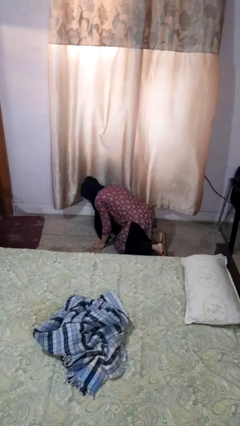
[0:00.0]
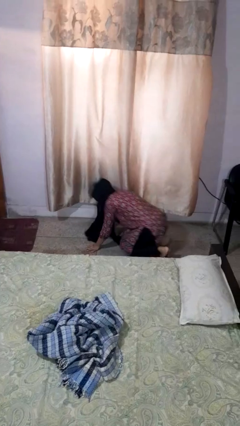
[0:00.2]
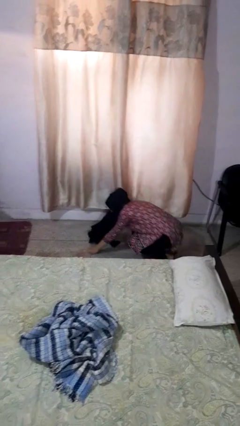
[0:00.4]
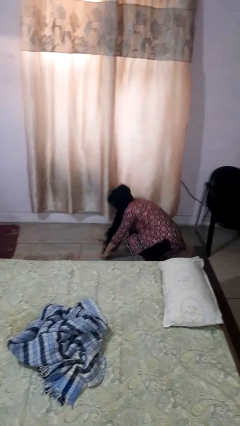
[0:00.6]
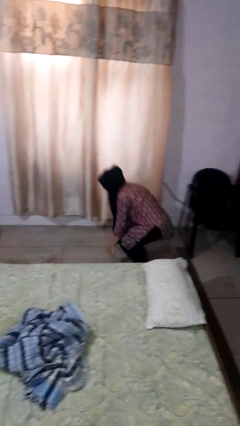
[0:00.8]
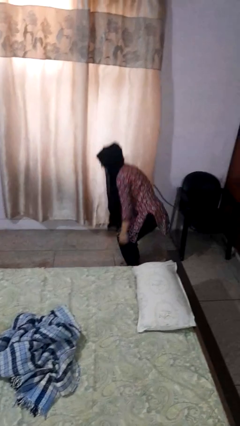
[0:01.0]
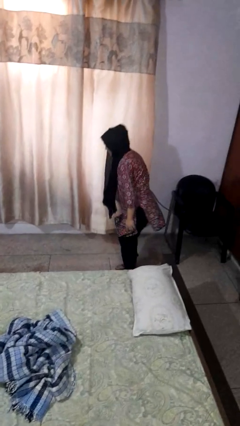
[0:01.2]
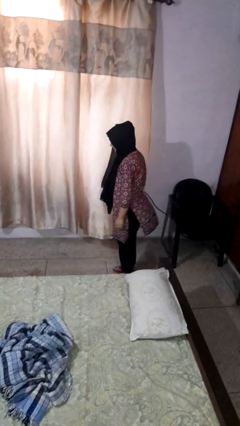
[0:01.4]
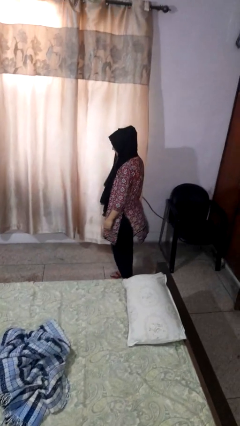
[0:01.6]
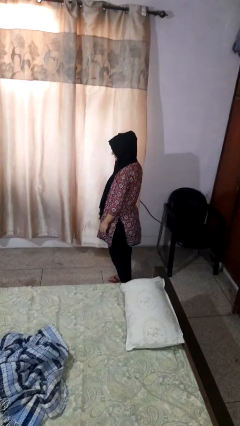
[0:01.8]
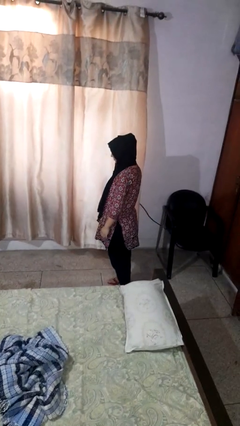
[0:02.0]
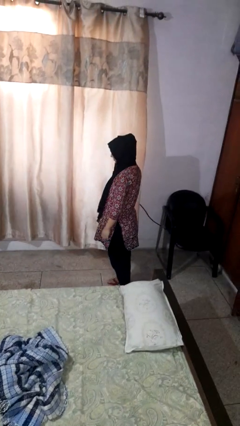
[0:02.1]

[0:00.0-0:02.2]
person stands up from floor

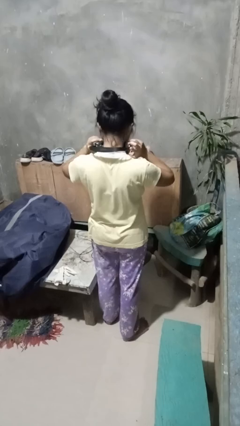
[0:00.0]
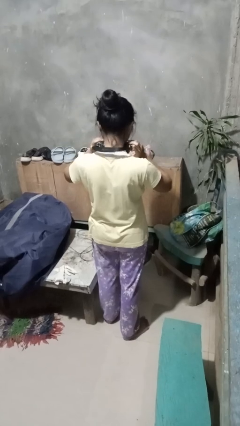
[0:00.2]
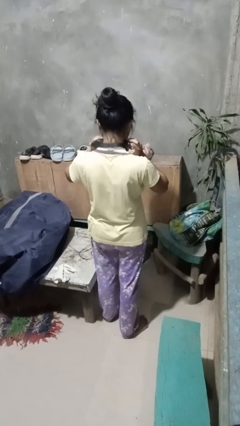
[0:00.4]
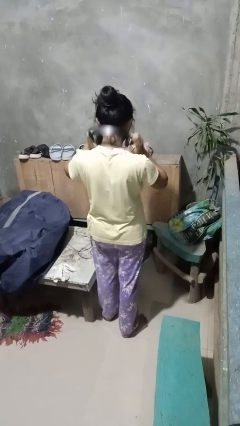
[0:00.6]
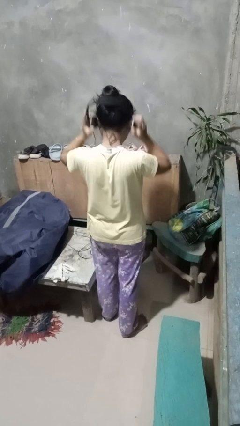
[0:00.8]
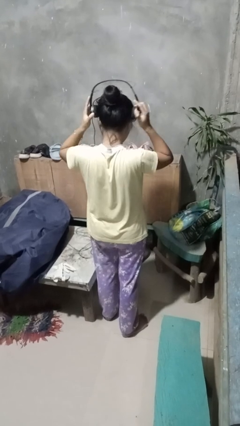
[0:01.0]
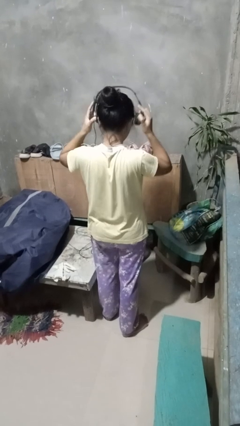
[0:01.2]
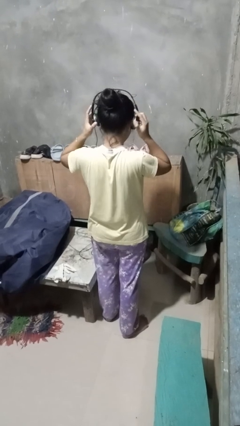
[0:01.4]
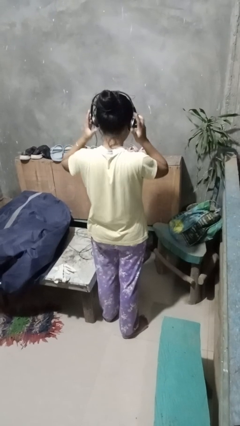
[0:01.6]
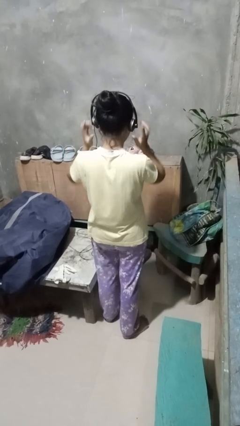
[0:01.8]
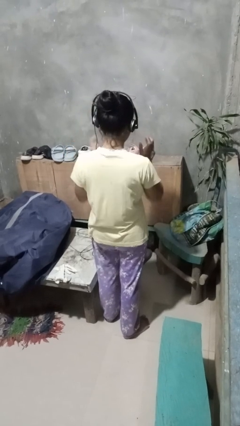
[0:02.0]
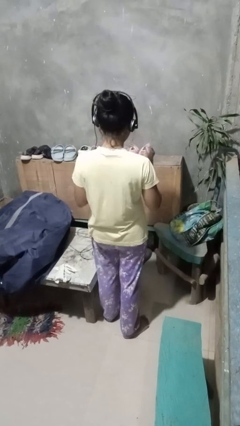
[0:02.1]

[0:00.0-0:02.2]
person puts on headphones

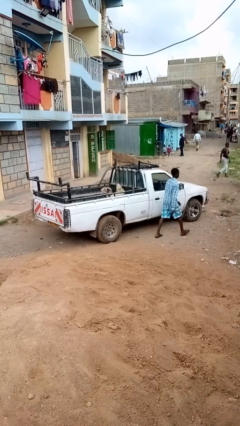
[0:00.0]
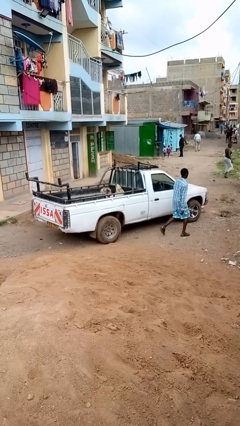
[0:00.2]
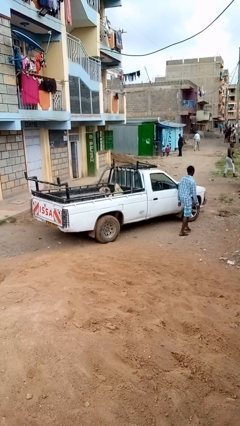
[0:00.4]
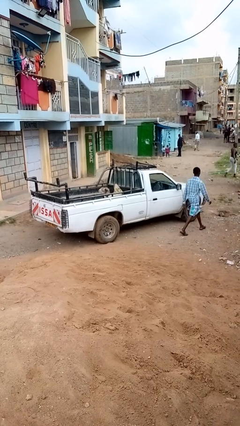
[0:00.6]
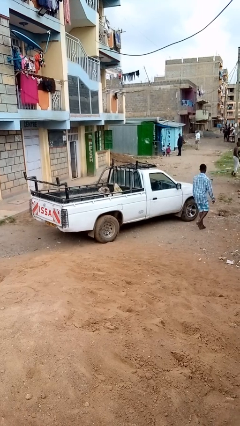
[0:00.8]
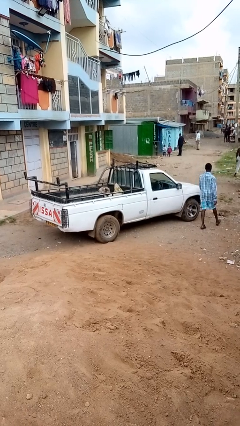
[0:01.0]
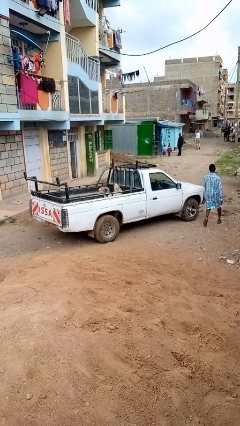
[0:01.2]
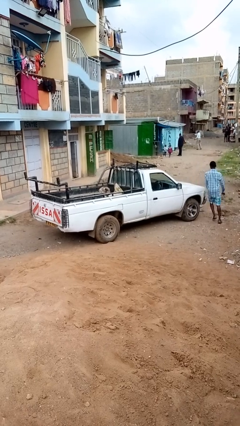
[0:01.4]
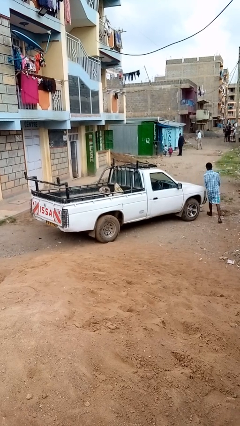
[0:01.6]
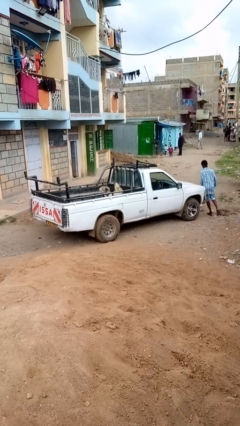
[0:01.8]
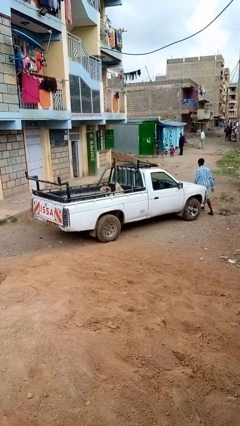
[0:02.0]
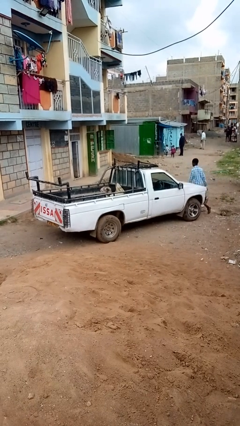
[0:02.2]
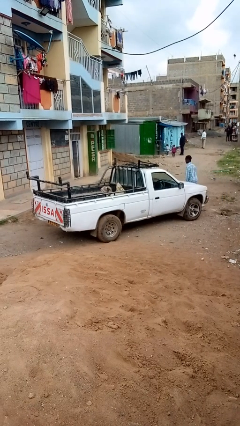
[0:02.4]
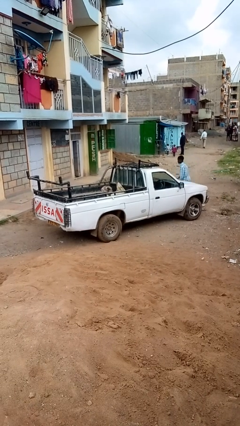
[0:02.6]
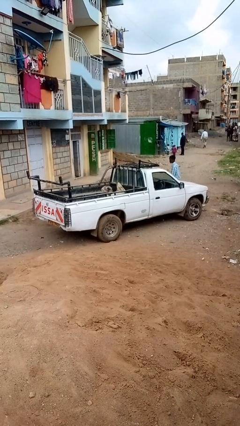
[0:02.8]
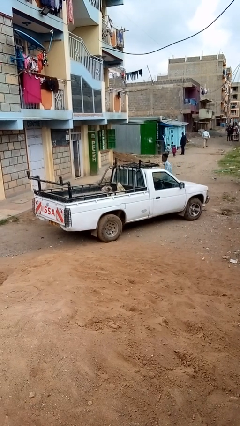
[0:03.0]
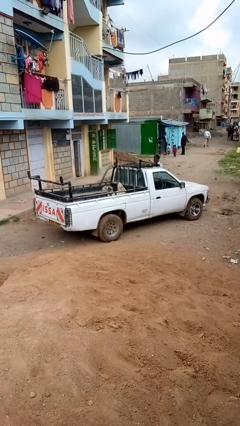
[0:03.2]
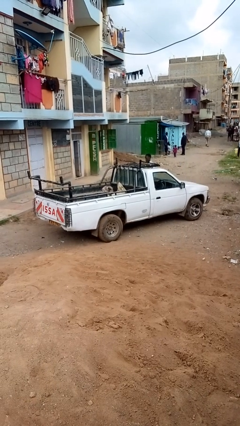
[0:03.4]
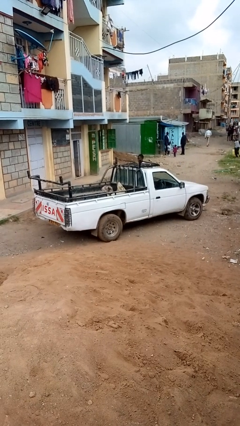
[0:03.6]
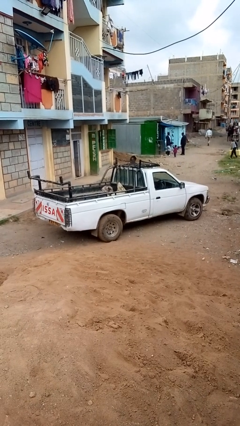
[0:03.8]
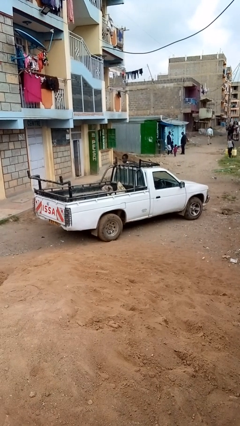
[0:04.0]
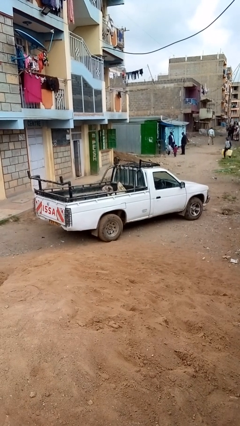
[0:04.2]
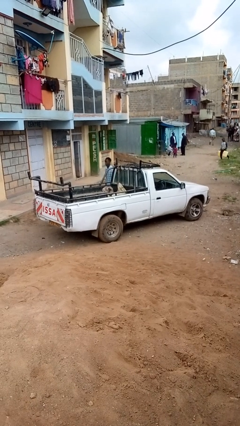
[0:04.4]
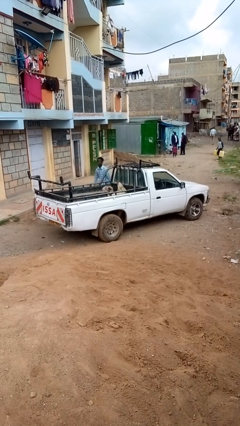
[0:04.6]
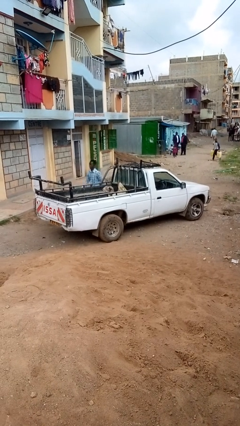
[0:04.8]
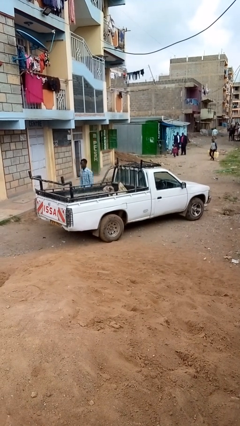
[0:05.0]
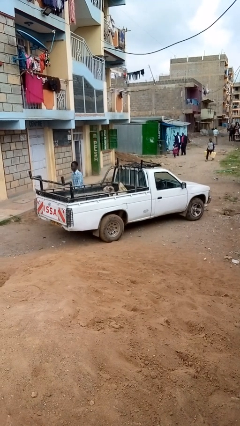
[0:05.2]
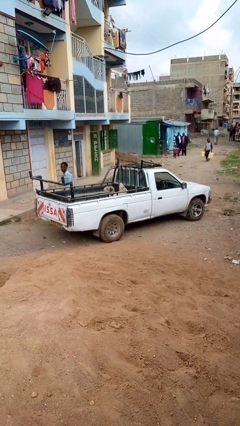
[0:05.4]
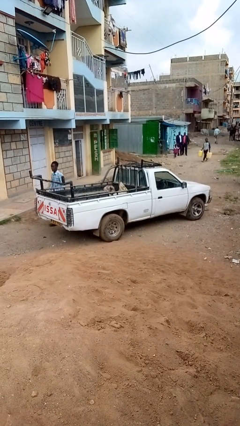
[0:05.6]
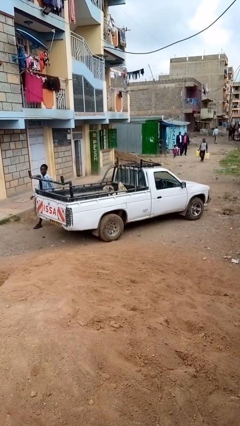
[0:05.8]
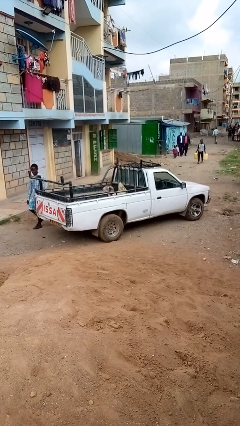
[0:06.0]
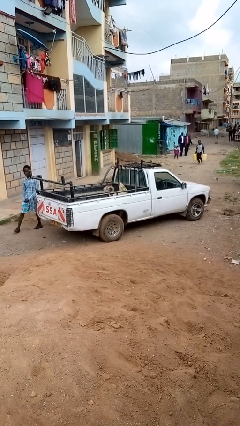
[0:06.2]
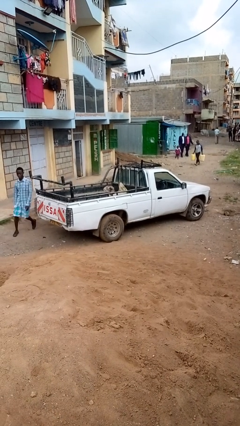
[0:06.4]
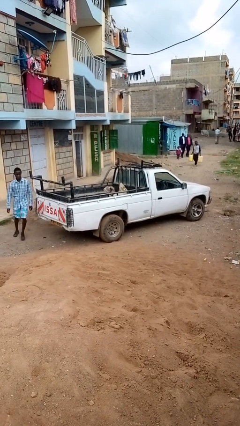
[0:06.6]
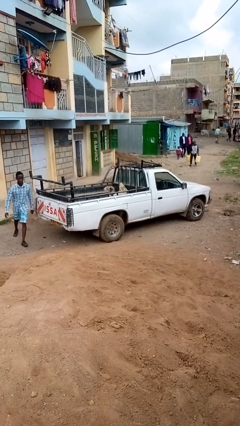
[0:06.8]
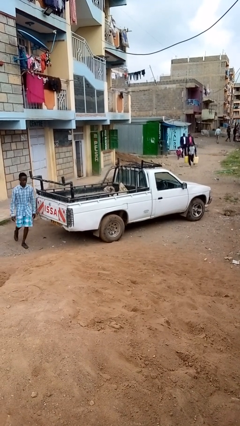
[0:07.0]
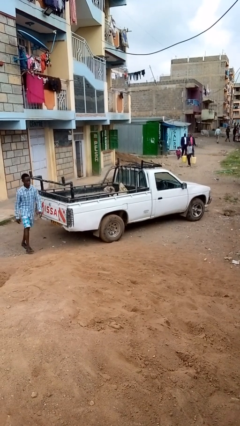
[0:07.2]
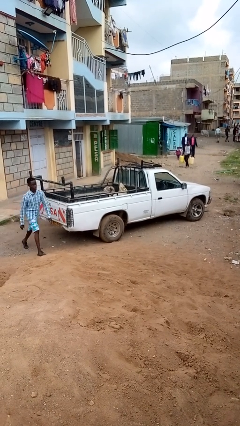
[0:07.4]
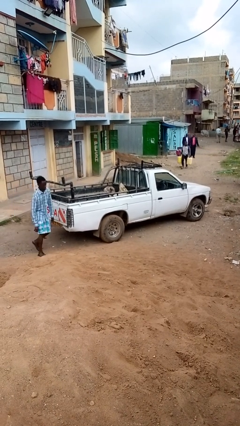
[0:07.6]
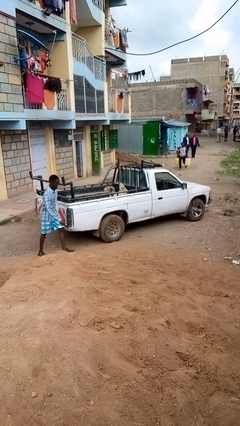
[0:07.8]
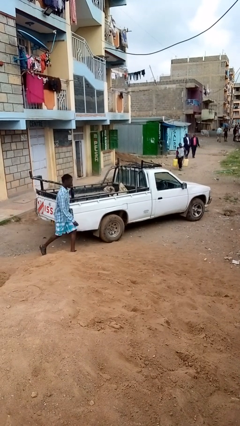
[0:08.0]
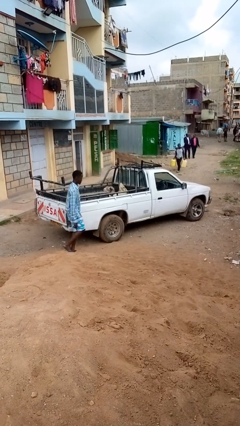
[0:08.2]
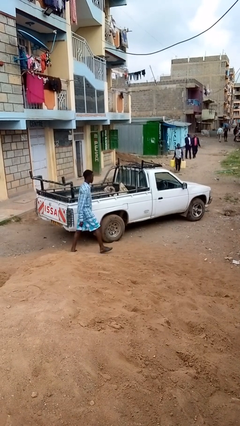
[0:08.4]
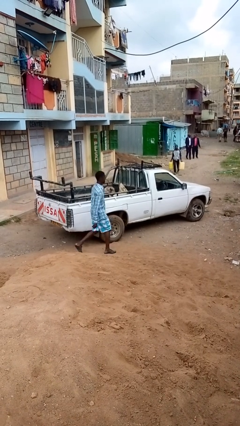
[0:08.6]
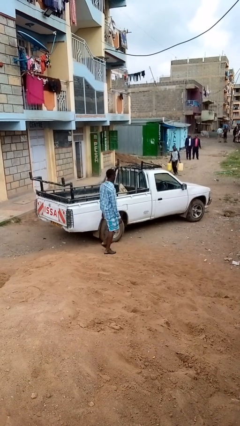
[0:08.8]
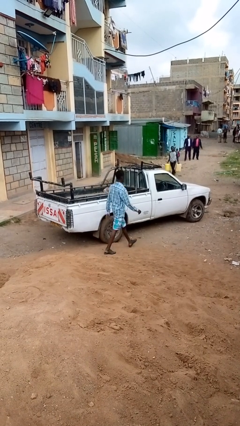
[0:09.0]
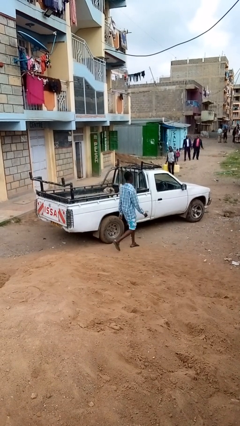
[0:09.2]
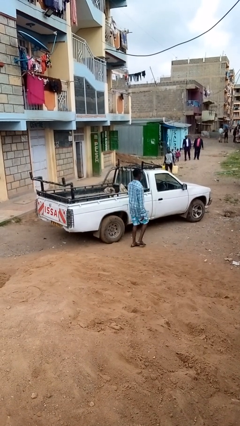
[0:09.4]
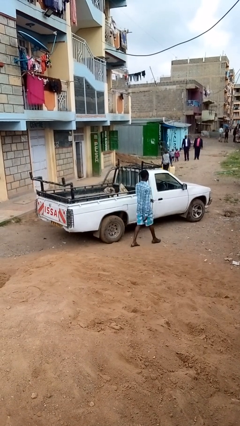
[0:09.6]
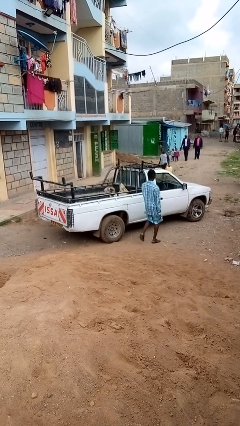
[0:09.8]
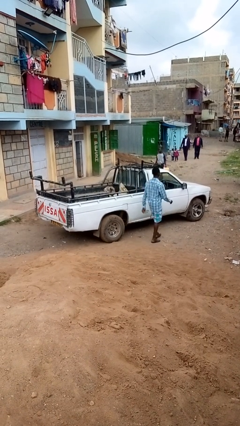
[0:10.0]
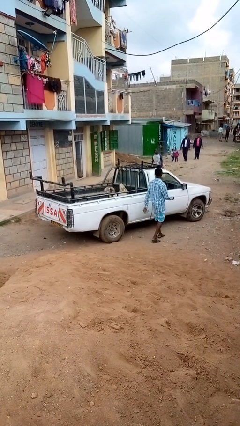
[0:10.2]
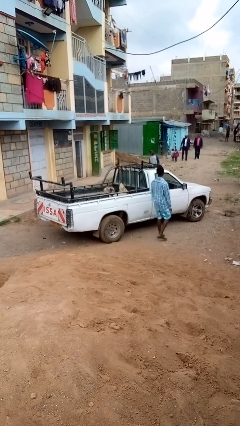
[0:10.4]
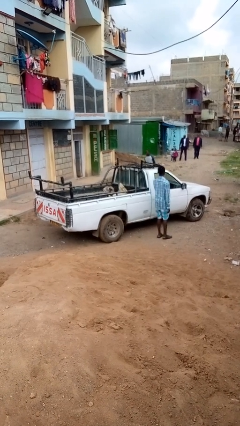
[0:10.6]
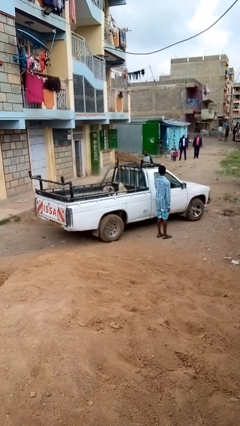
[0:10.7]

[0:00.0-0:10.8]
person walks around car

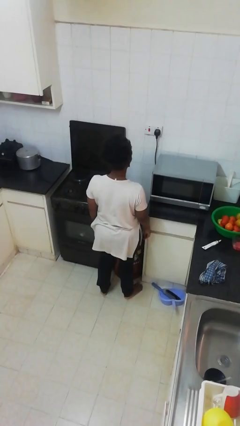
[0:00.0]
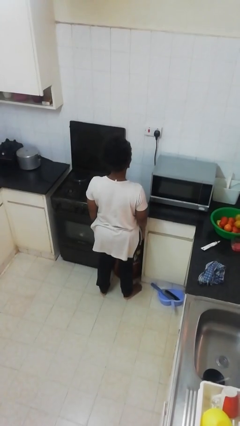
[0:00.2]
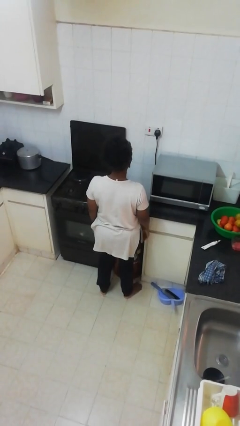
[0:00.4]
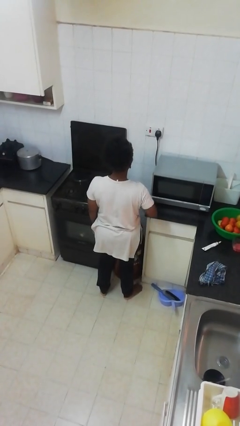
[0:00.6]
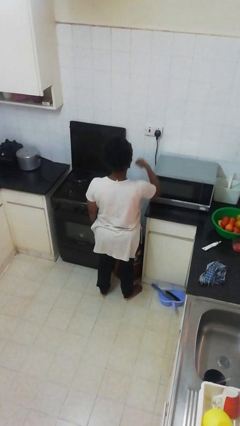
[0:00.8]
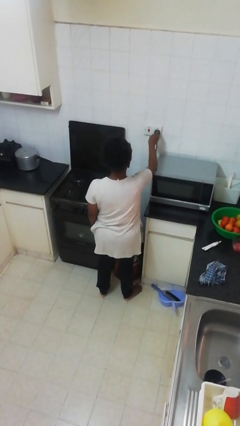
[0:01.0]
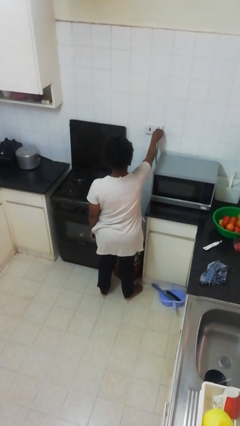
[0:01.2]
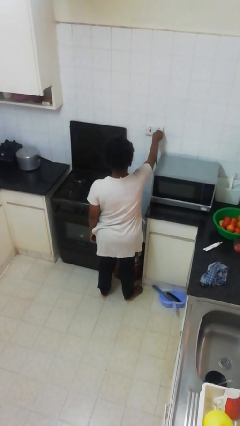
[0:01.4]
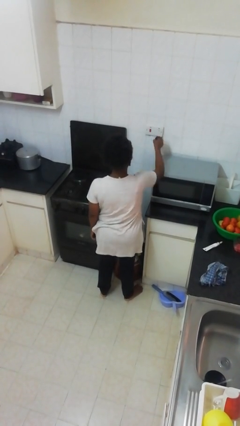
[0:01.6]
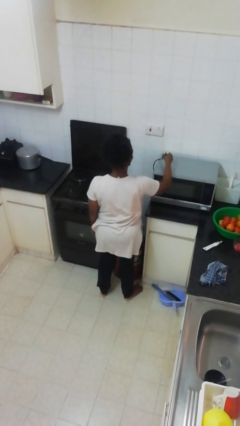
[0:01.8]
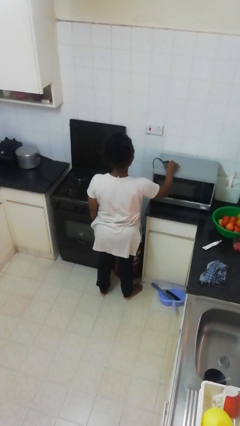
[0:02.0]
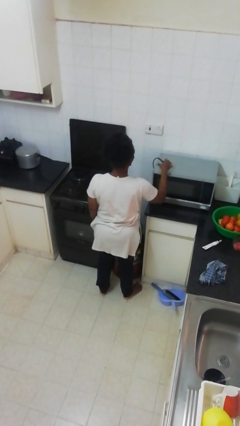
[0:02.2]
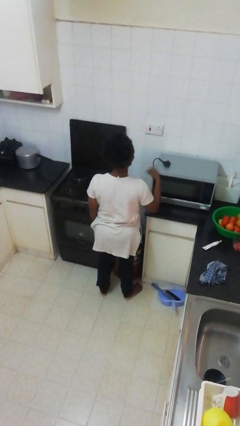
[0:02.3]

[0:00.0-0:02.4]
person unplugs from electrical socket

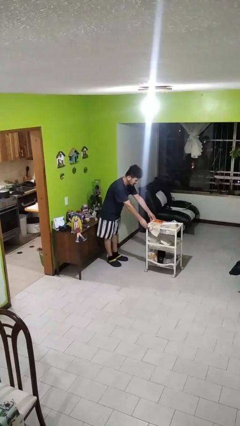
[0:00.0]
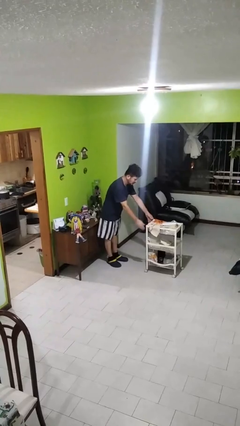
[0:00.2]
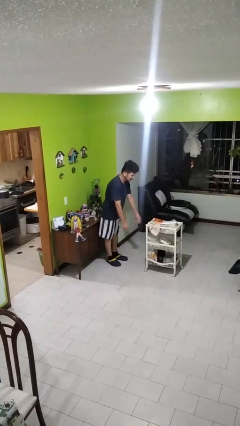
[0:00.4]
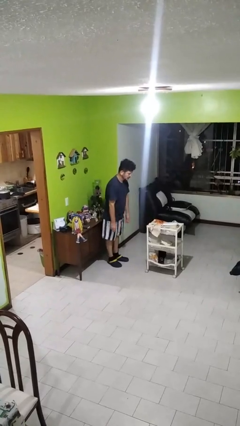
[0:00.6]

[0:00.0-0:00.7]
person pushes wheeled cart
